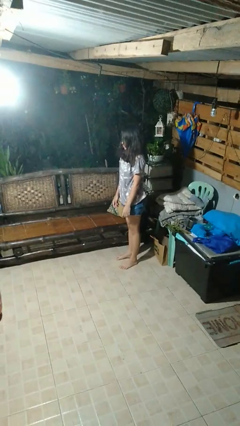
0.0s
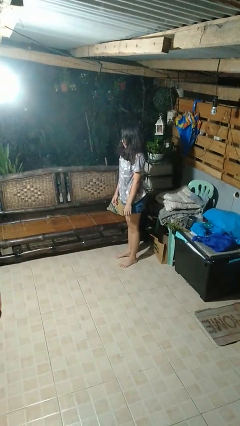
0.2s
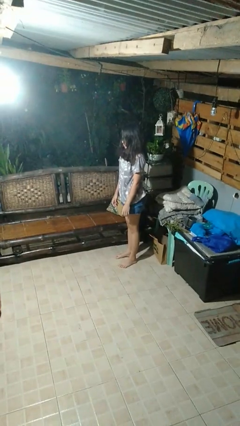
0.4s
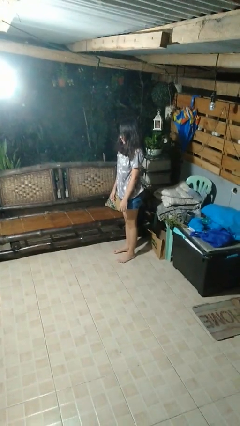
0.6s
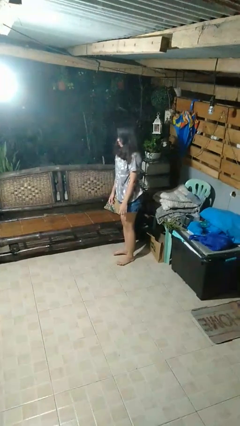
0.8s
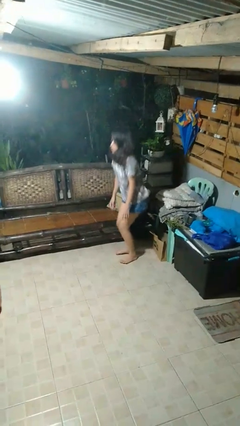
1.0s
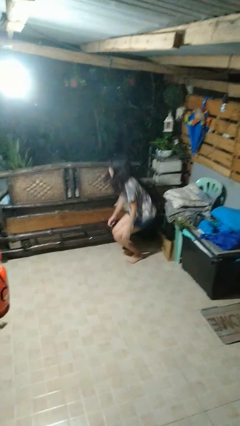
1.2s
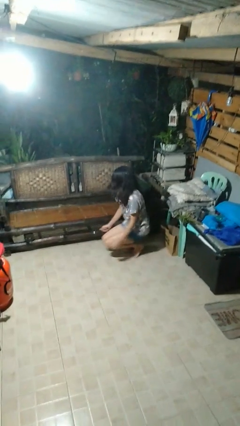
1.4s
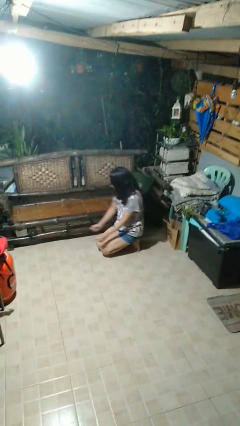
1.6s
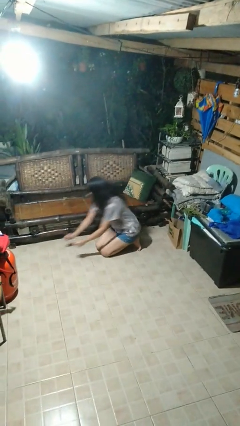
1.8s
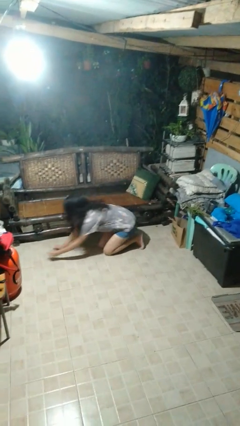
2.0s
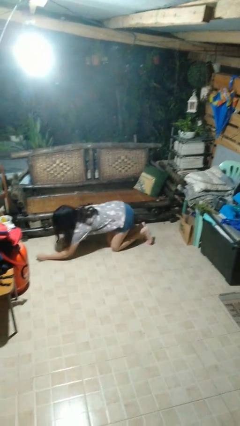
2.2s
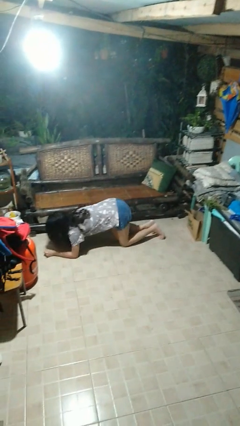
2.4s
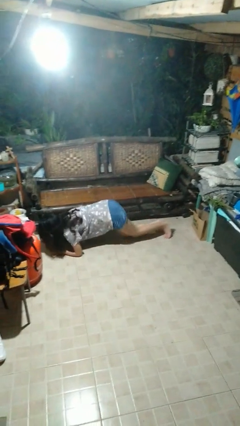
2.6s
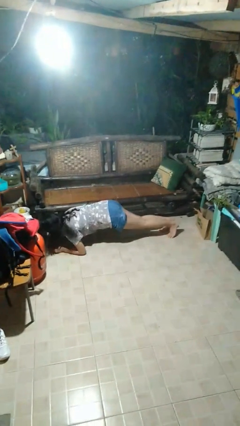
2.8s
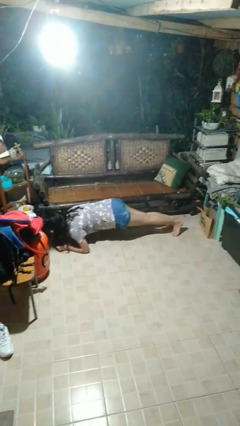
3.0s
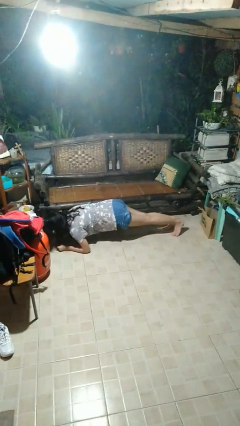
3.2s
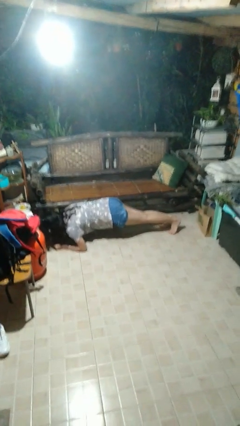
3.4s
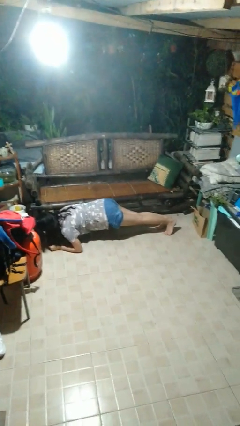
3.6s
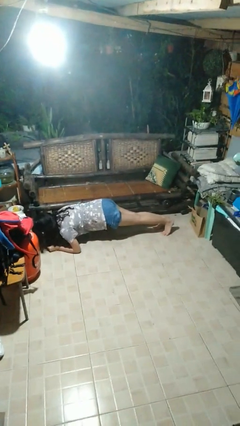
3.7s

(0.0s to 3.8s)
person exercises with plank

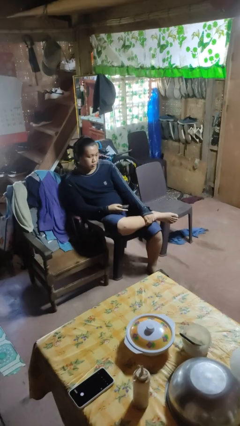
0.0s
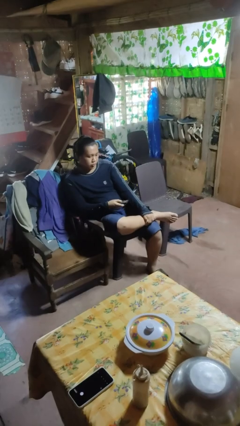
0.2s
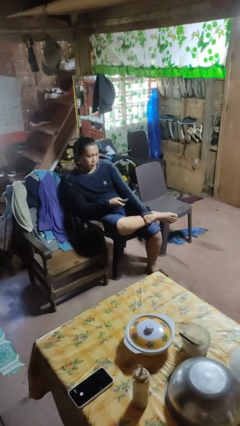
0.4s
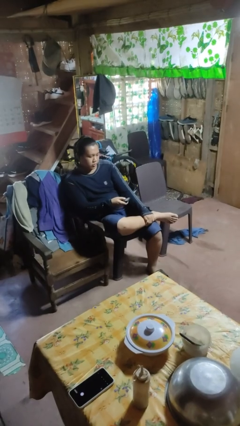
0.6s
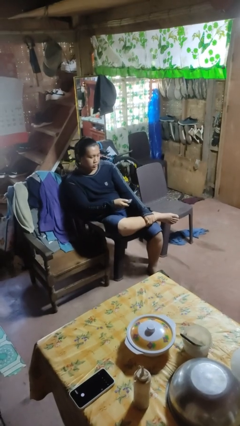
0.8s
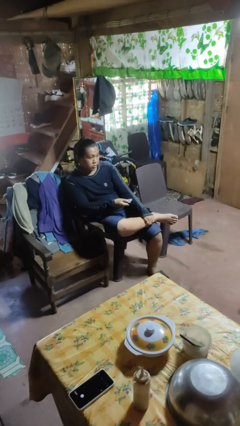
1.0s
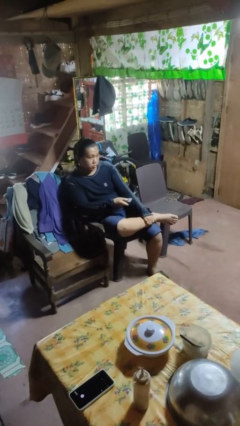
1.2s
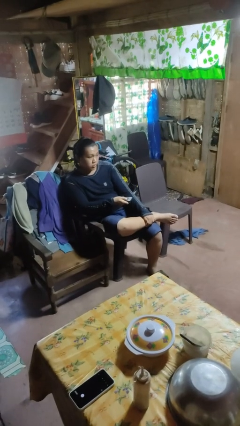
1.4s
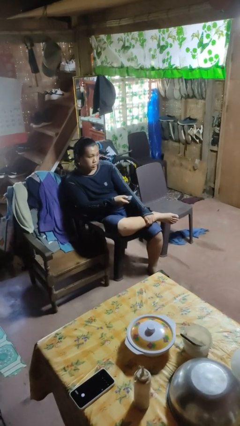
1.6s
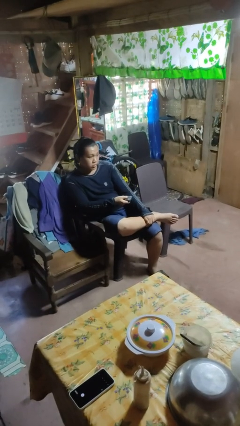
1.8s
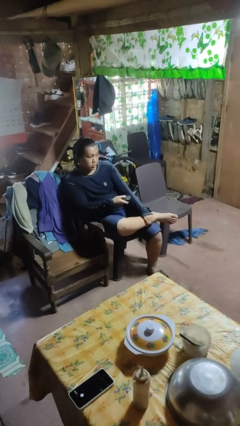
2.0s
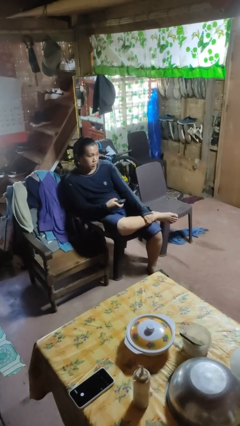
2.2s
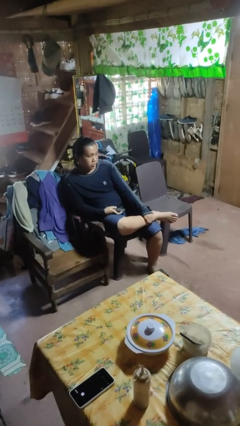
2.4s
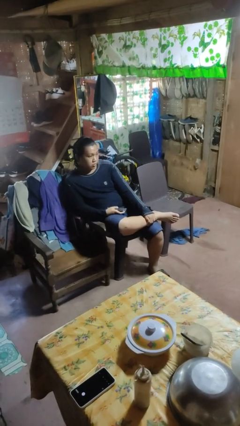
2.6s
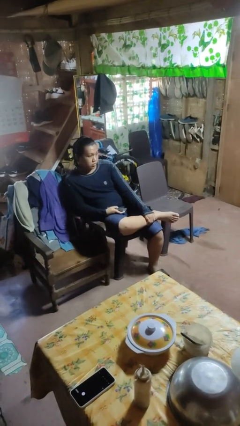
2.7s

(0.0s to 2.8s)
person uses television remote

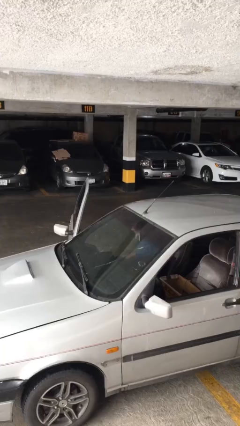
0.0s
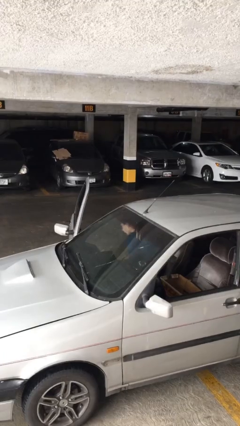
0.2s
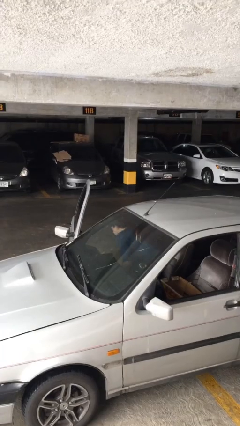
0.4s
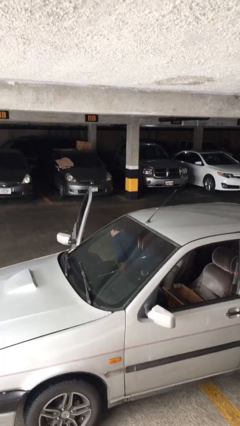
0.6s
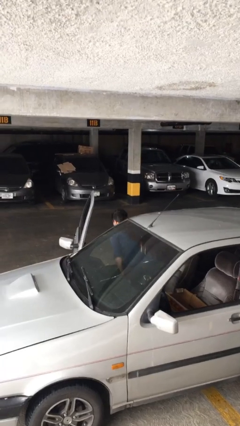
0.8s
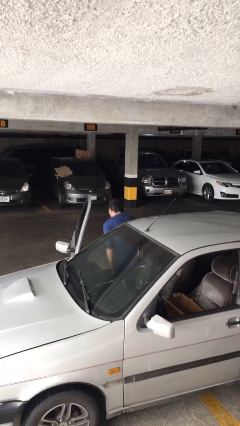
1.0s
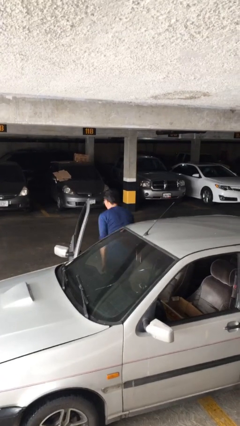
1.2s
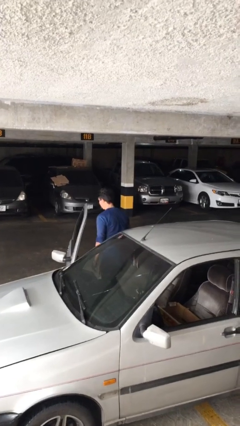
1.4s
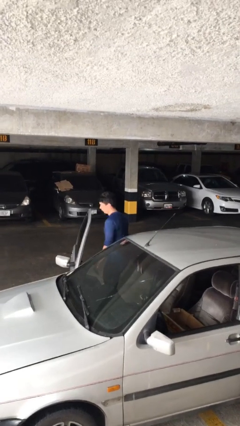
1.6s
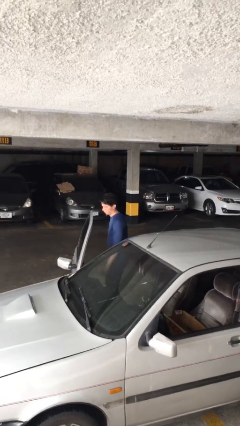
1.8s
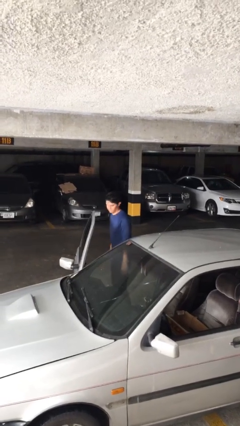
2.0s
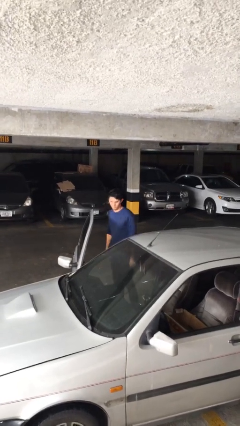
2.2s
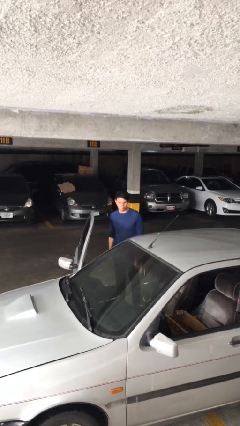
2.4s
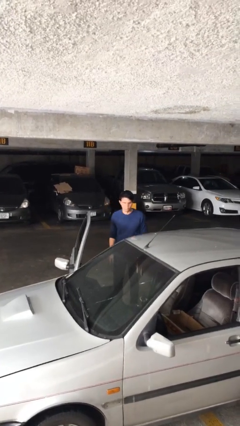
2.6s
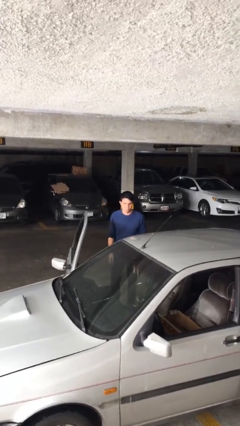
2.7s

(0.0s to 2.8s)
person exits car

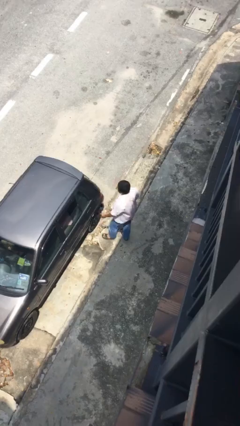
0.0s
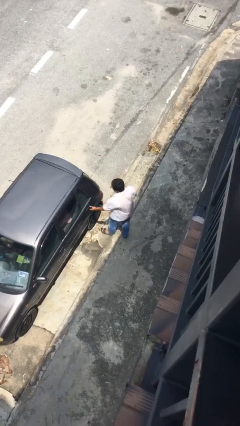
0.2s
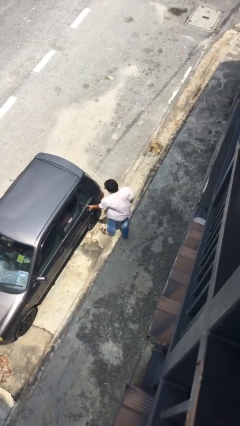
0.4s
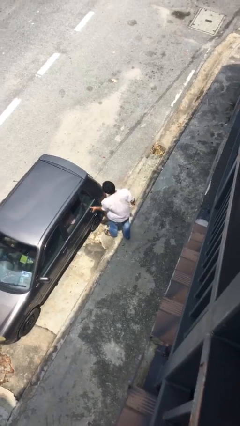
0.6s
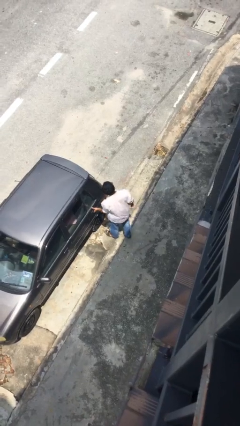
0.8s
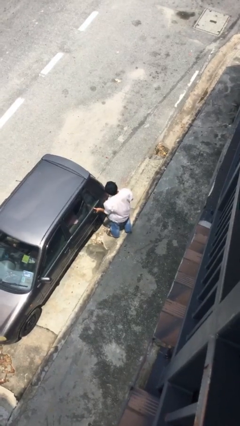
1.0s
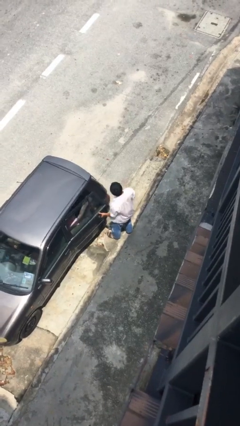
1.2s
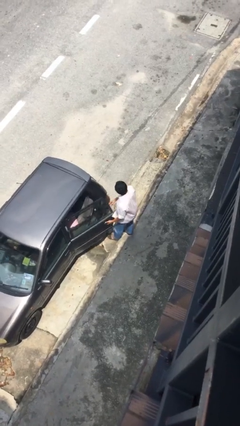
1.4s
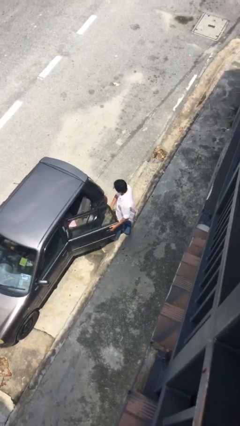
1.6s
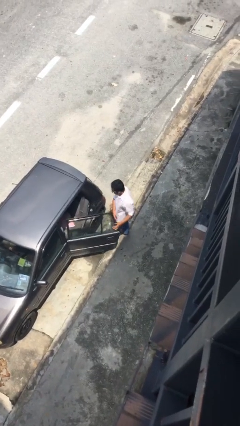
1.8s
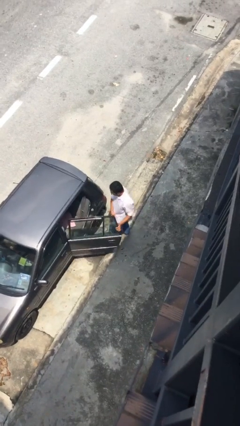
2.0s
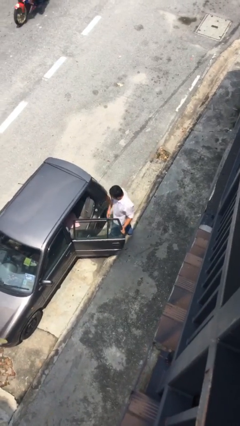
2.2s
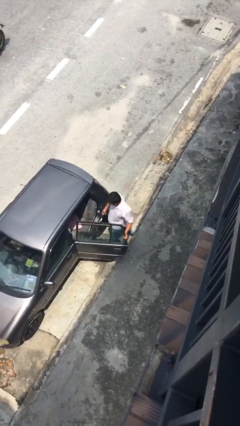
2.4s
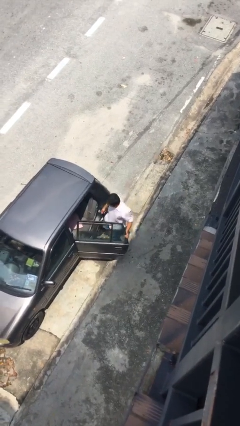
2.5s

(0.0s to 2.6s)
person opens car door

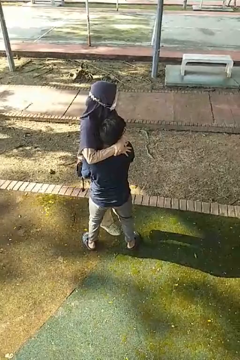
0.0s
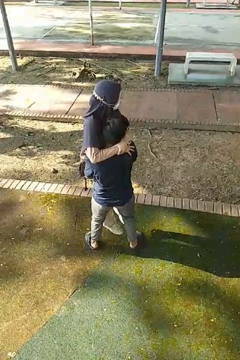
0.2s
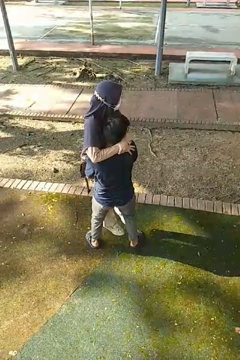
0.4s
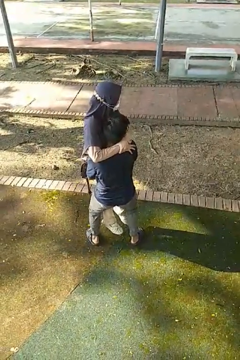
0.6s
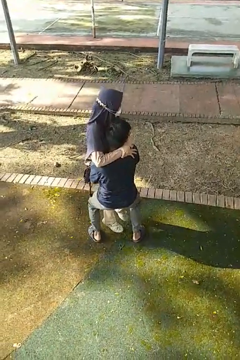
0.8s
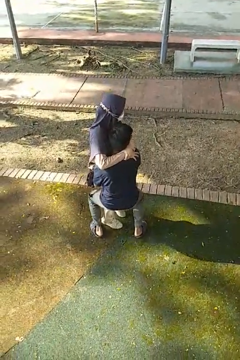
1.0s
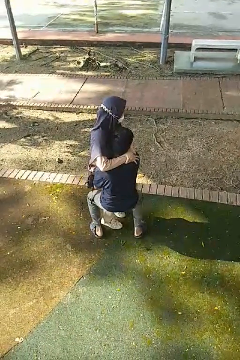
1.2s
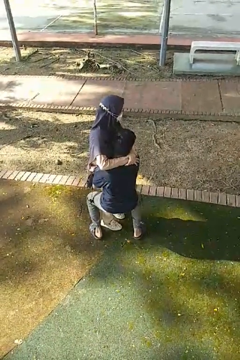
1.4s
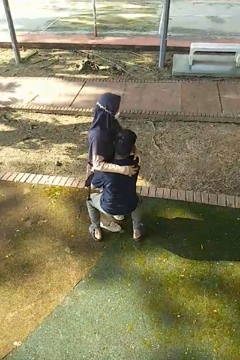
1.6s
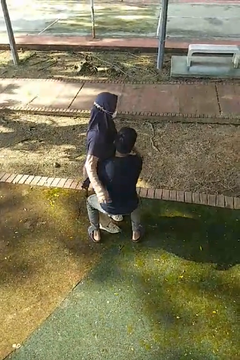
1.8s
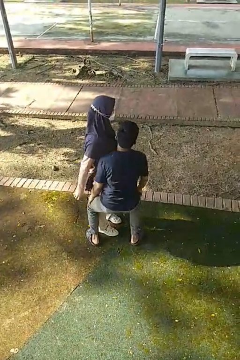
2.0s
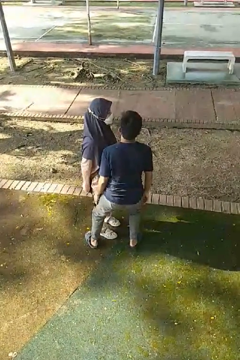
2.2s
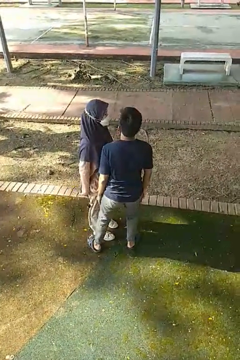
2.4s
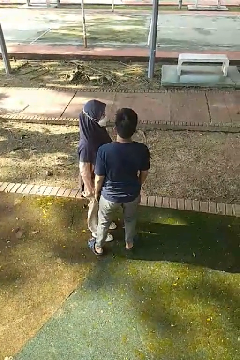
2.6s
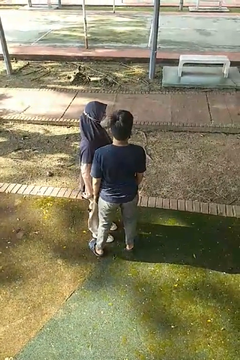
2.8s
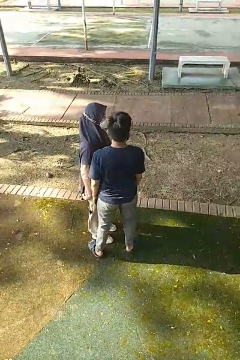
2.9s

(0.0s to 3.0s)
person puts down person

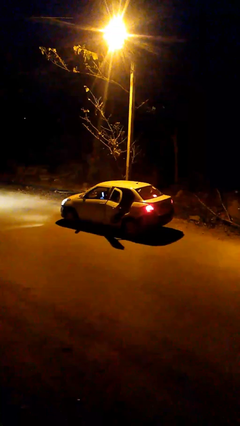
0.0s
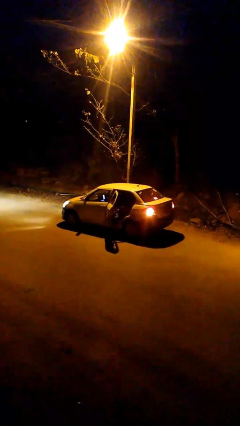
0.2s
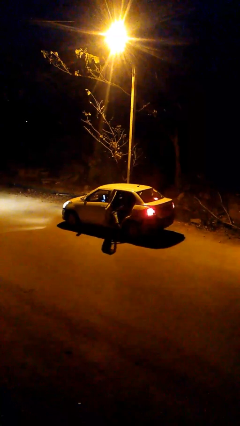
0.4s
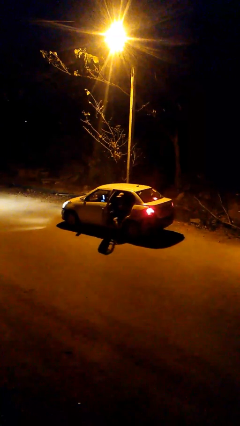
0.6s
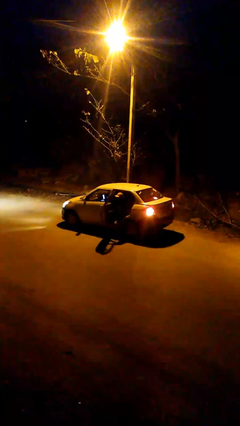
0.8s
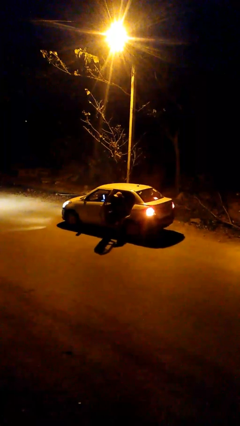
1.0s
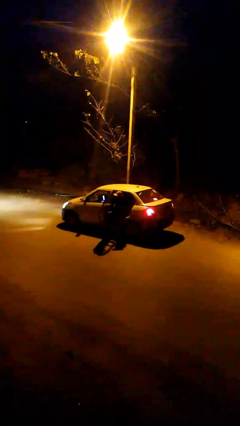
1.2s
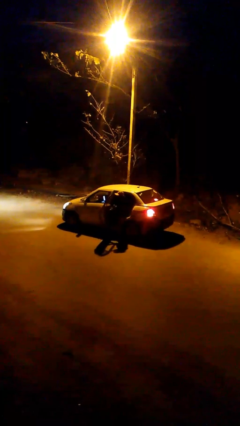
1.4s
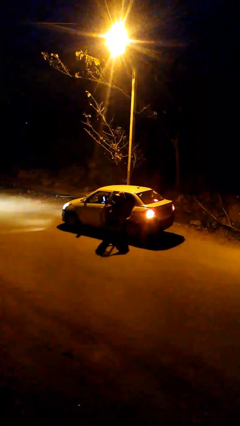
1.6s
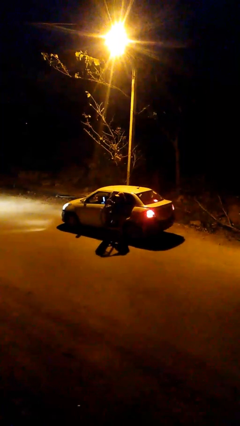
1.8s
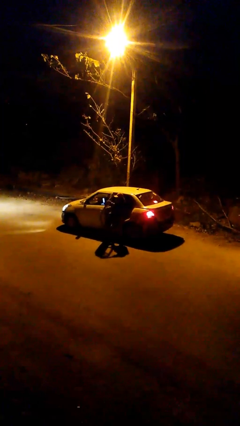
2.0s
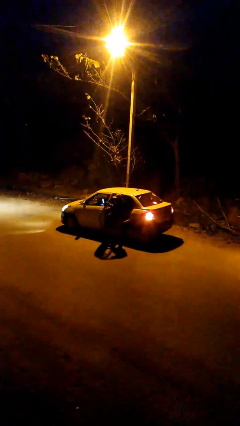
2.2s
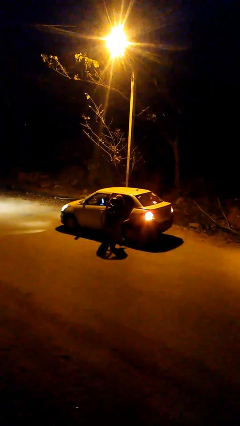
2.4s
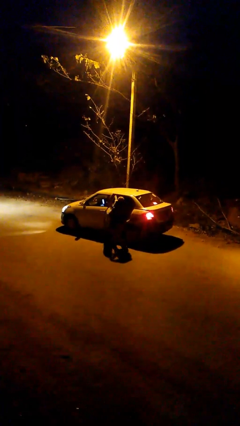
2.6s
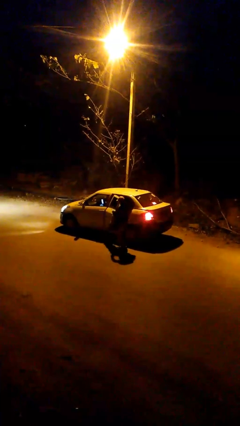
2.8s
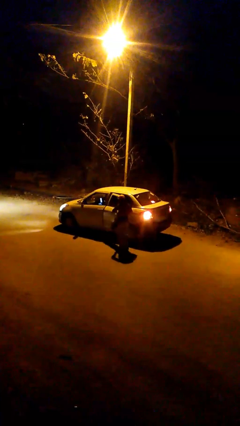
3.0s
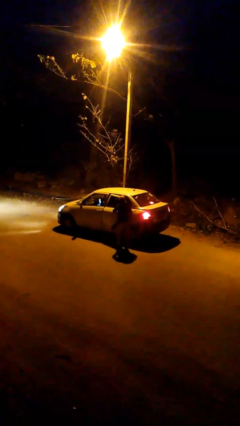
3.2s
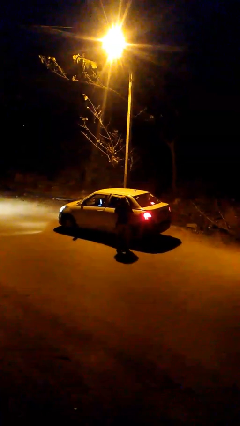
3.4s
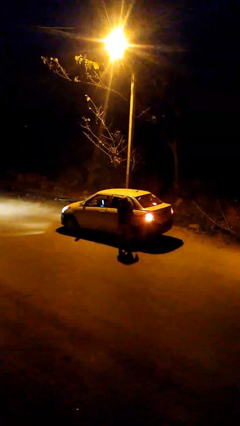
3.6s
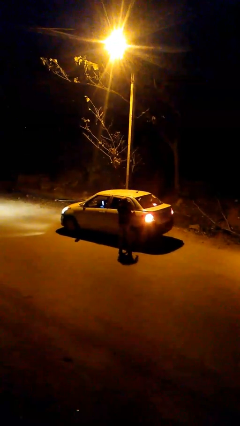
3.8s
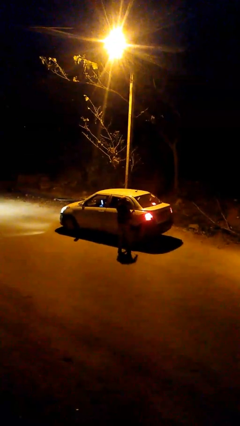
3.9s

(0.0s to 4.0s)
car drops off person
